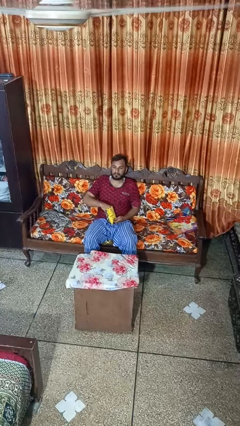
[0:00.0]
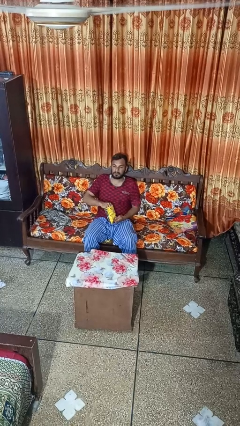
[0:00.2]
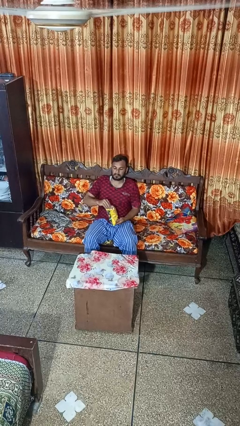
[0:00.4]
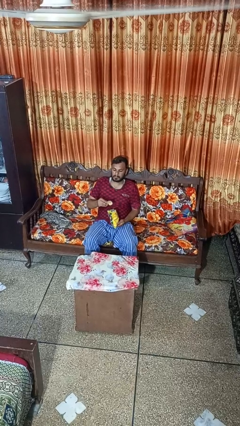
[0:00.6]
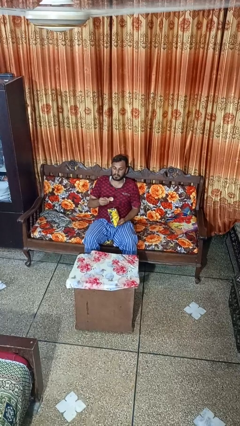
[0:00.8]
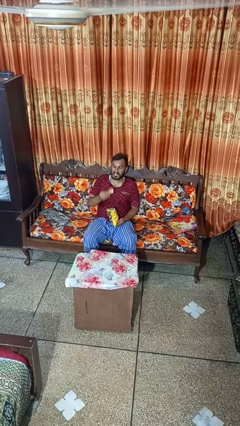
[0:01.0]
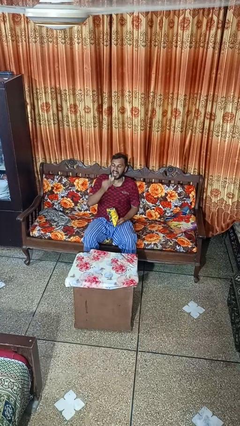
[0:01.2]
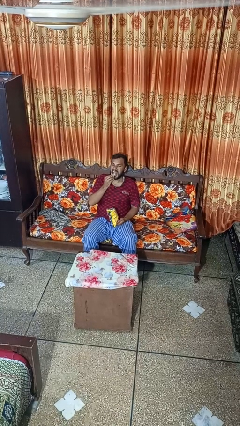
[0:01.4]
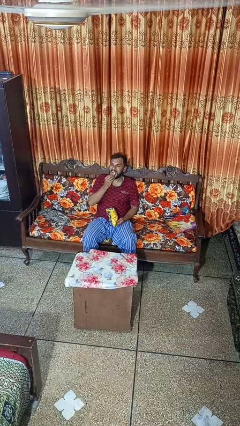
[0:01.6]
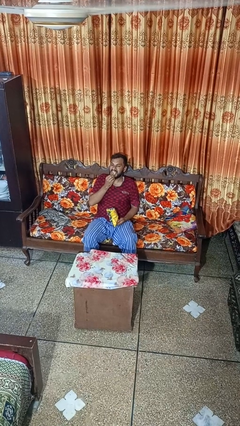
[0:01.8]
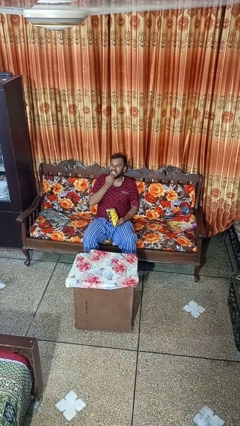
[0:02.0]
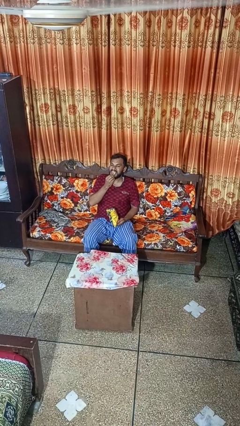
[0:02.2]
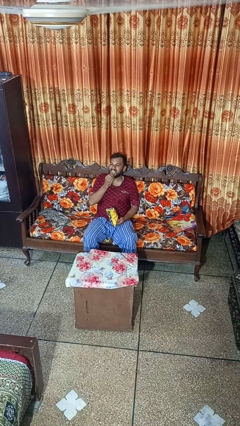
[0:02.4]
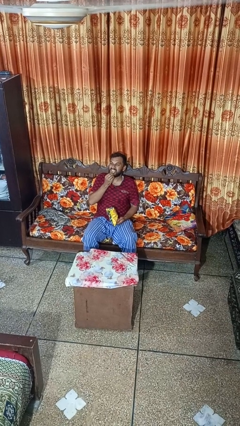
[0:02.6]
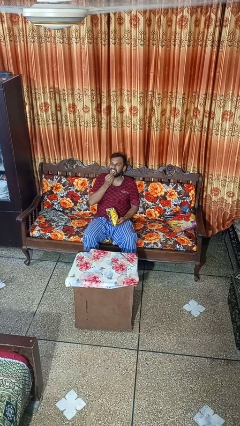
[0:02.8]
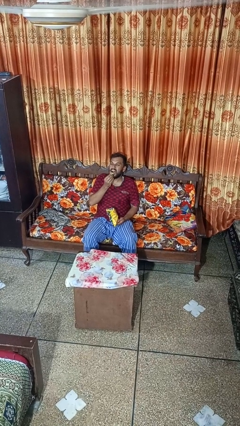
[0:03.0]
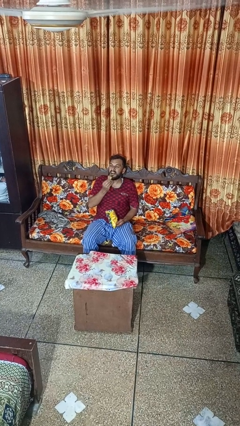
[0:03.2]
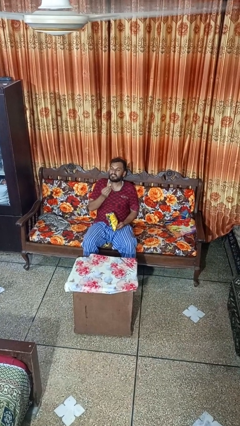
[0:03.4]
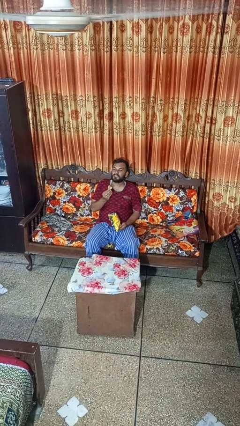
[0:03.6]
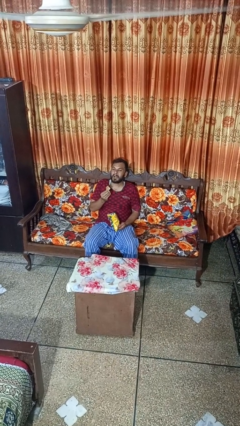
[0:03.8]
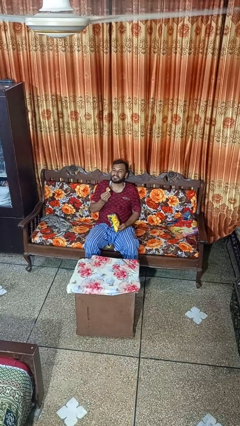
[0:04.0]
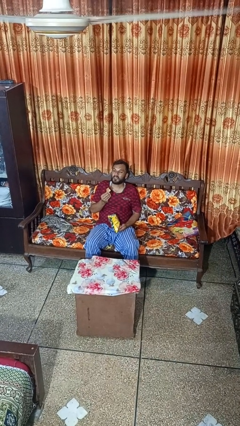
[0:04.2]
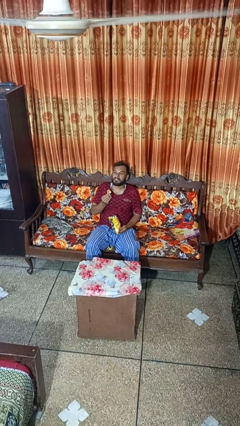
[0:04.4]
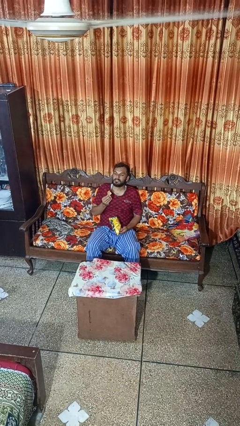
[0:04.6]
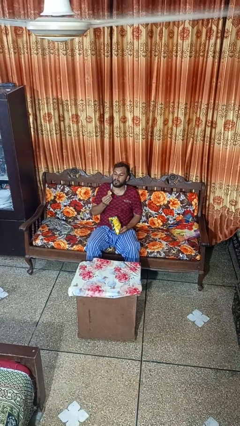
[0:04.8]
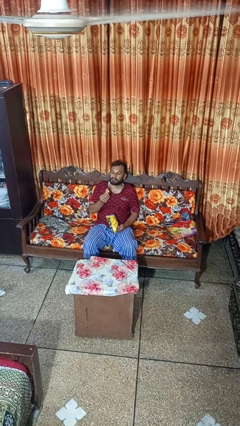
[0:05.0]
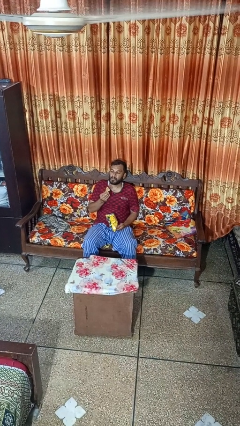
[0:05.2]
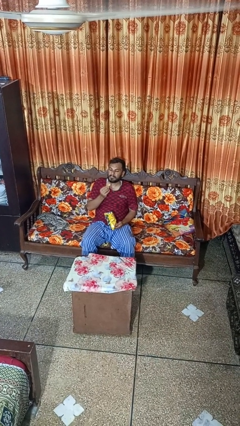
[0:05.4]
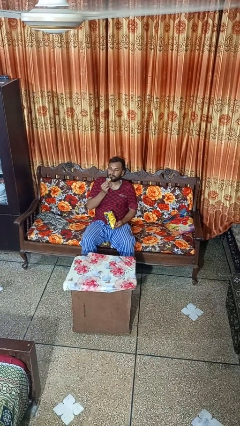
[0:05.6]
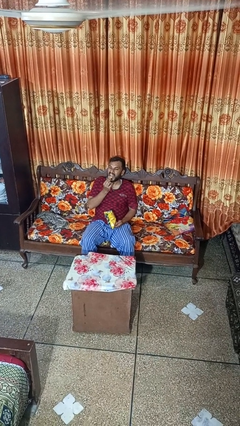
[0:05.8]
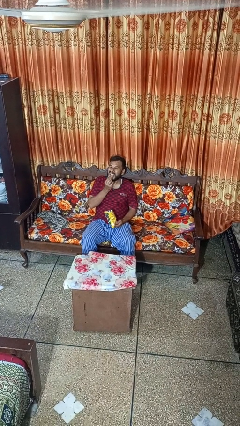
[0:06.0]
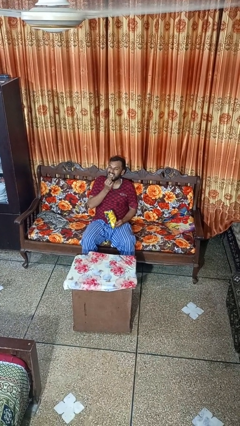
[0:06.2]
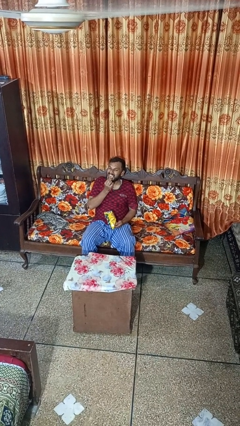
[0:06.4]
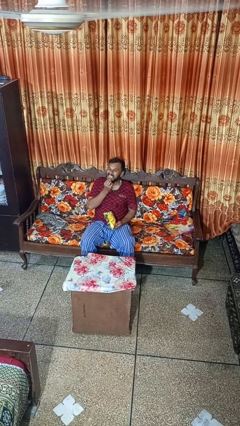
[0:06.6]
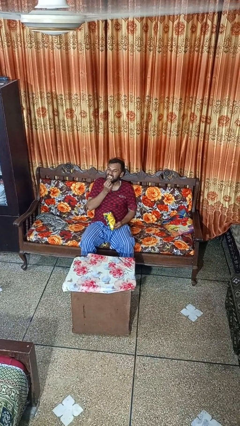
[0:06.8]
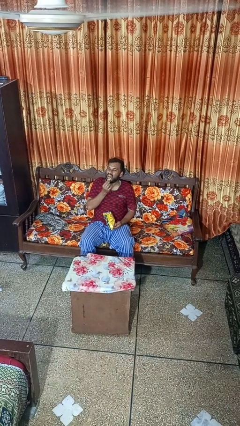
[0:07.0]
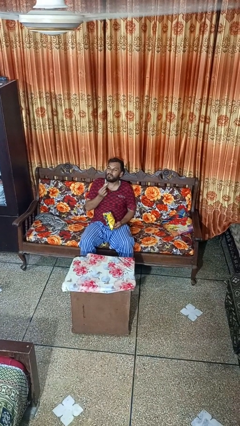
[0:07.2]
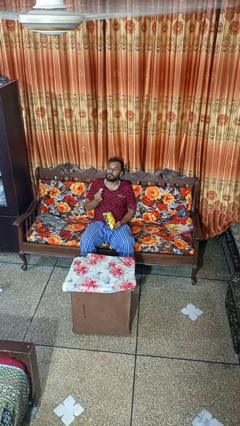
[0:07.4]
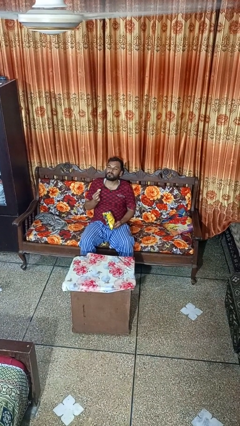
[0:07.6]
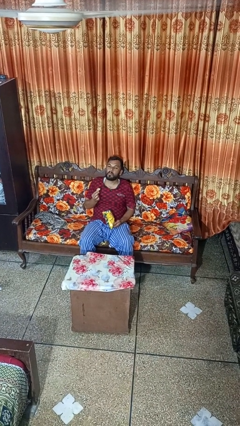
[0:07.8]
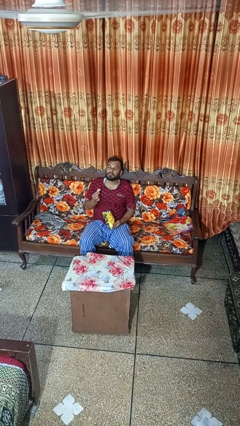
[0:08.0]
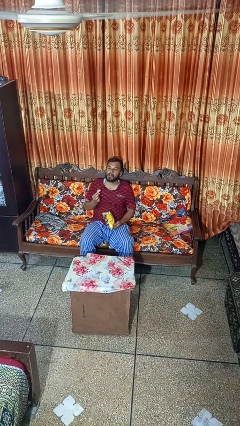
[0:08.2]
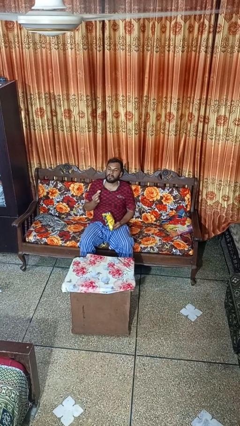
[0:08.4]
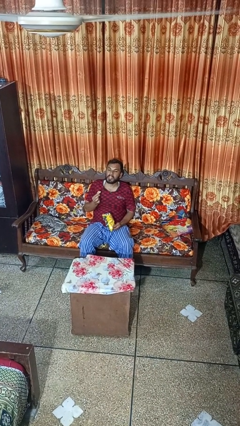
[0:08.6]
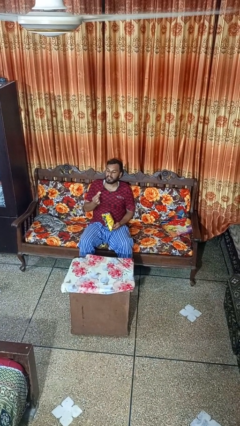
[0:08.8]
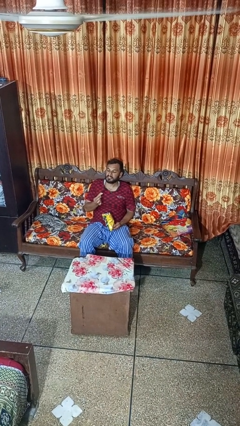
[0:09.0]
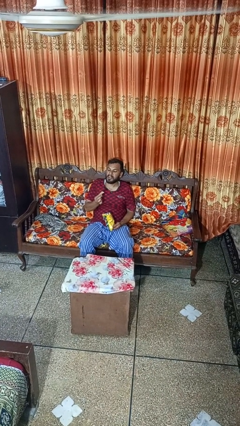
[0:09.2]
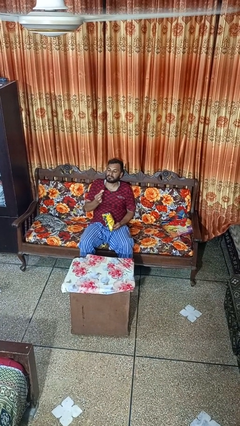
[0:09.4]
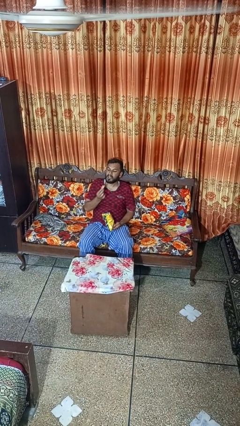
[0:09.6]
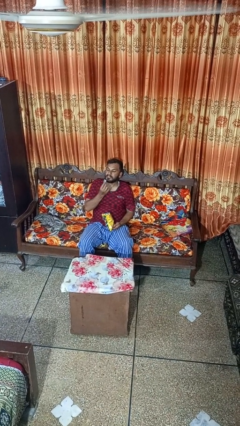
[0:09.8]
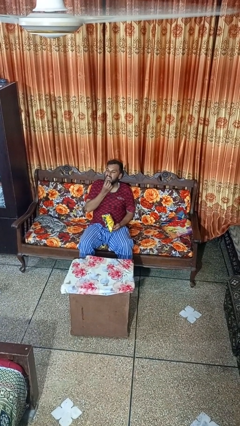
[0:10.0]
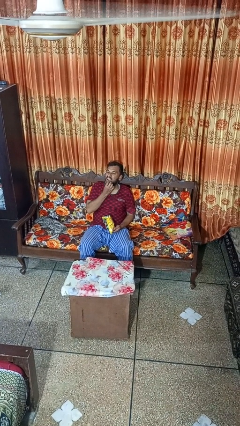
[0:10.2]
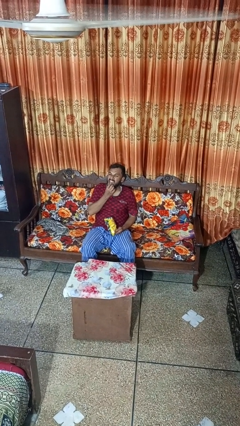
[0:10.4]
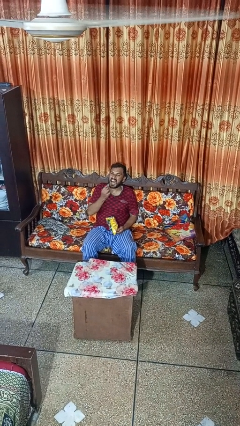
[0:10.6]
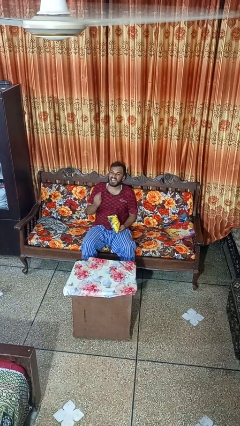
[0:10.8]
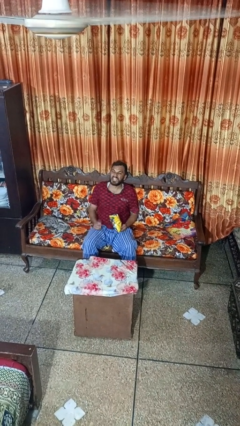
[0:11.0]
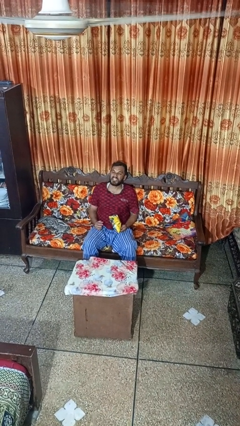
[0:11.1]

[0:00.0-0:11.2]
person eats snack from bag

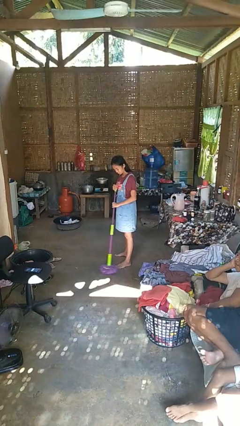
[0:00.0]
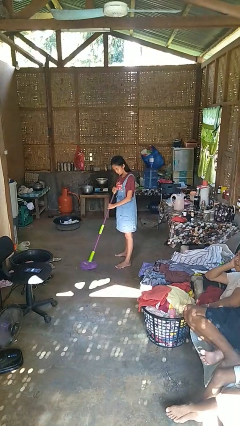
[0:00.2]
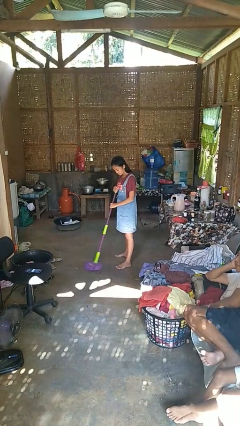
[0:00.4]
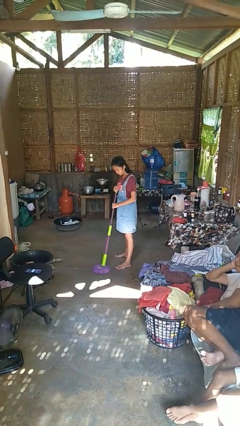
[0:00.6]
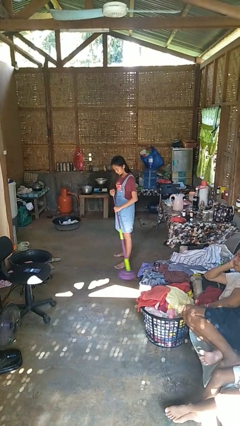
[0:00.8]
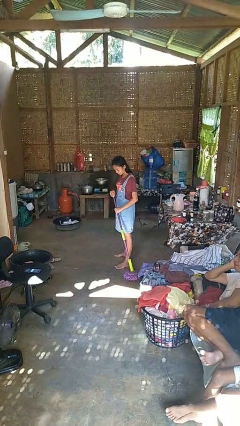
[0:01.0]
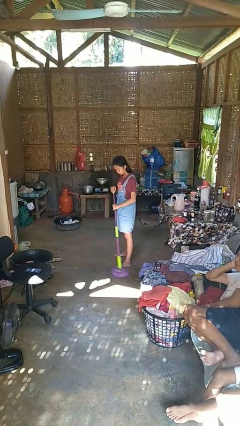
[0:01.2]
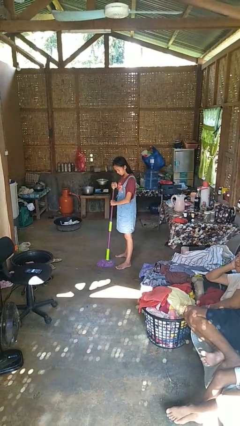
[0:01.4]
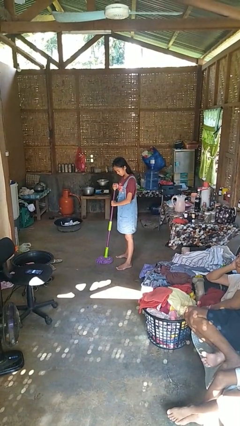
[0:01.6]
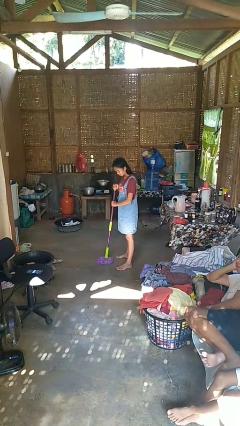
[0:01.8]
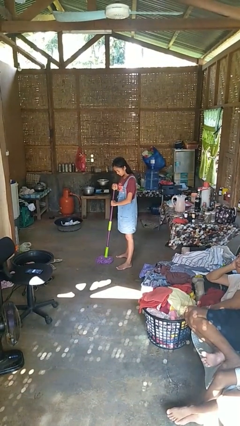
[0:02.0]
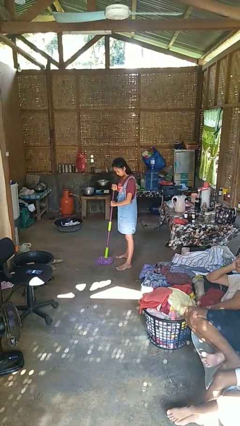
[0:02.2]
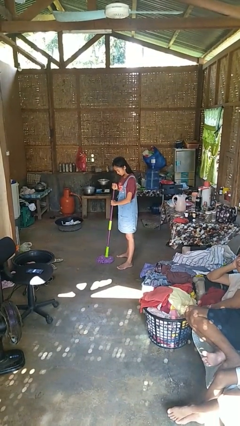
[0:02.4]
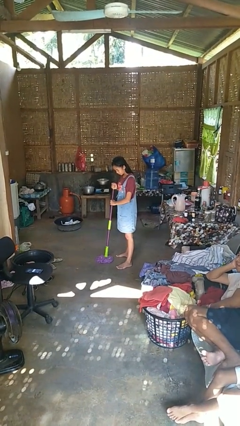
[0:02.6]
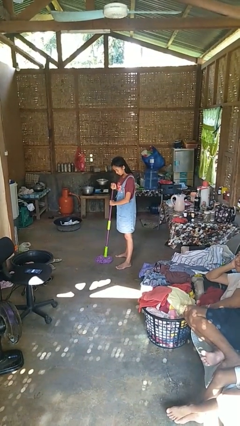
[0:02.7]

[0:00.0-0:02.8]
person mops

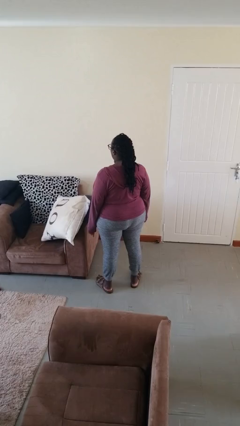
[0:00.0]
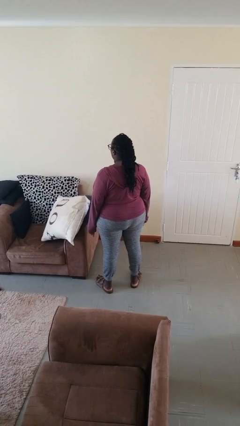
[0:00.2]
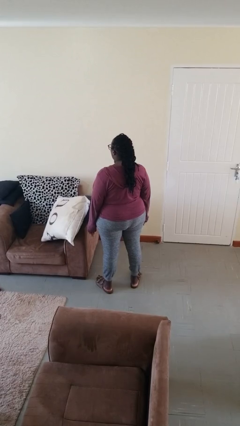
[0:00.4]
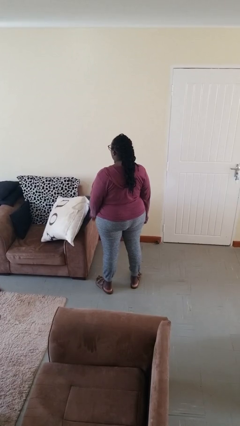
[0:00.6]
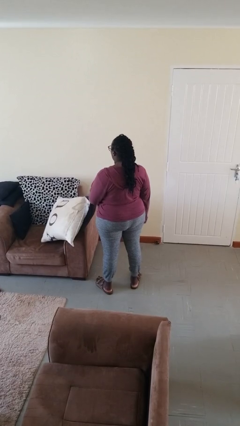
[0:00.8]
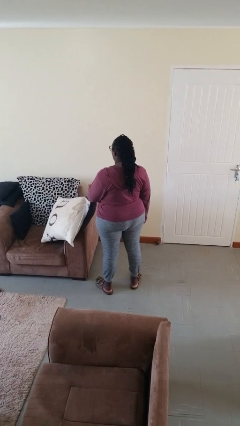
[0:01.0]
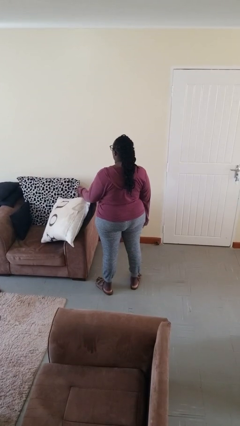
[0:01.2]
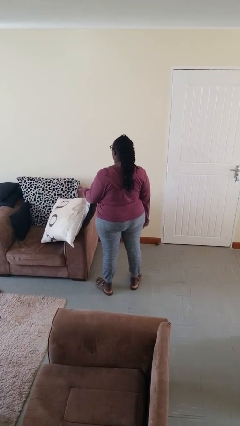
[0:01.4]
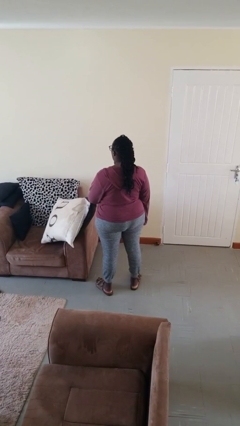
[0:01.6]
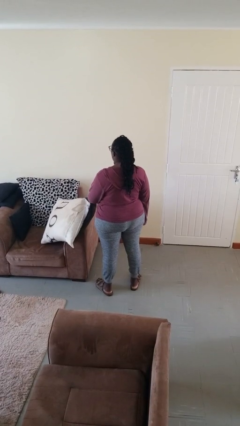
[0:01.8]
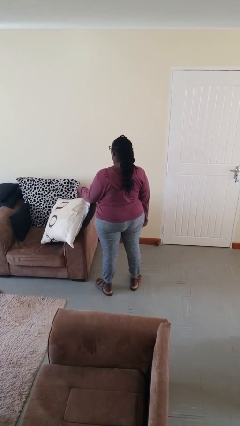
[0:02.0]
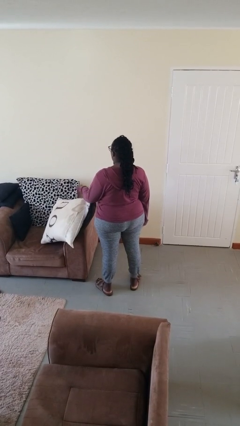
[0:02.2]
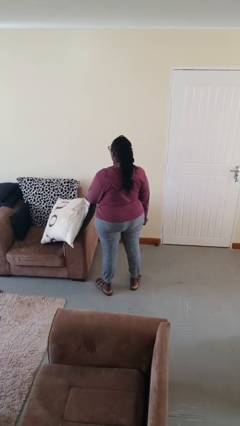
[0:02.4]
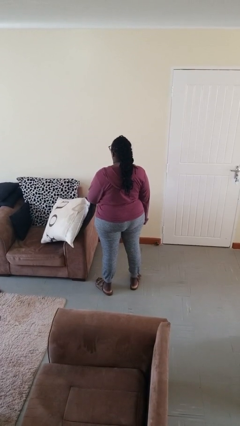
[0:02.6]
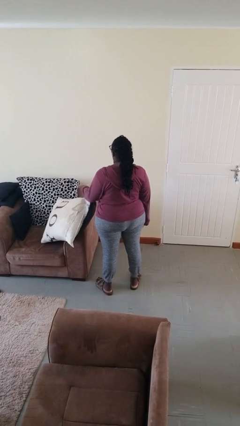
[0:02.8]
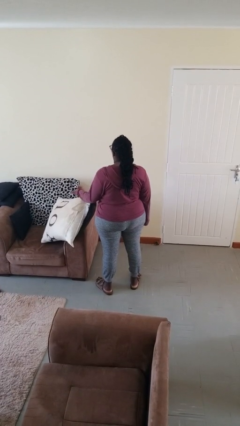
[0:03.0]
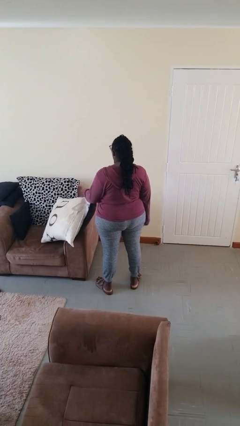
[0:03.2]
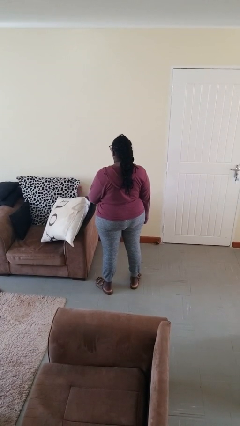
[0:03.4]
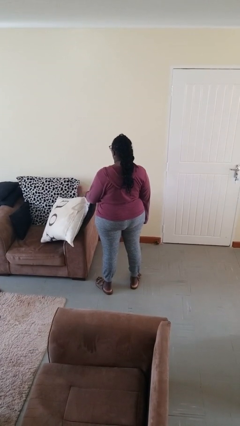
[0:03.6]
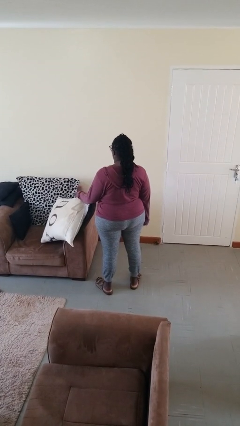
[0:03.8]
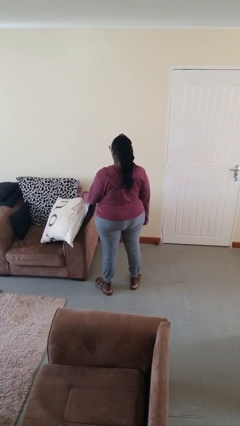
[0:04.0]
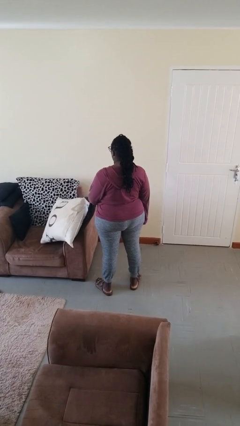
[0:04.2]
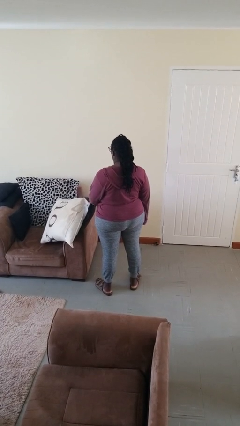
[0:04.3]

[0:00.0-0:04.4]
person waves hand over object
